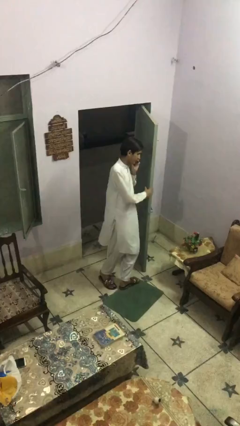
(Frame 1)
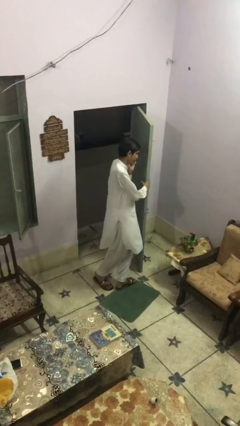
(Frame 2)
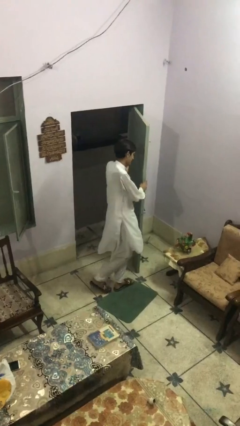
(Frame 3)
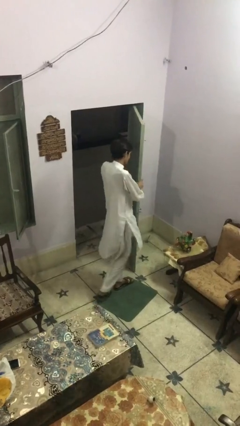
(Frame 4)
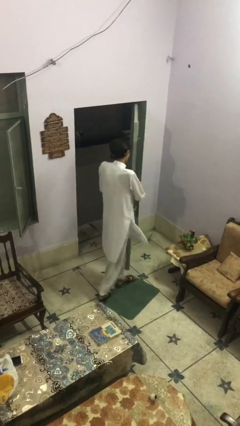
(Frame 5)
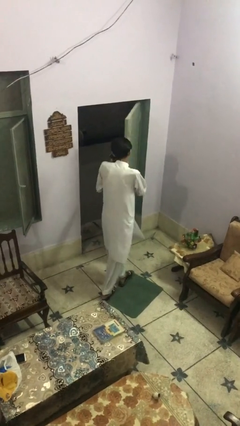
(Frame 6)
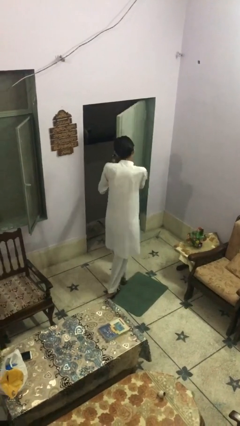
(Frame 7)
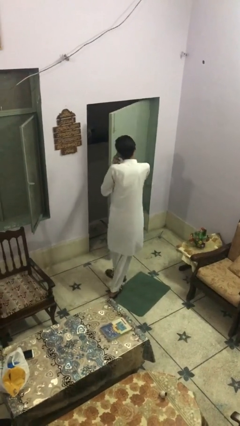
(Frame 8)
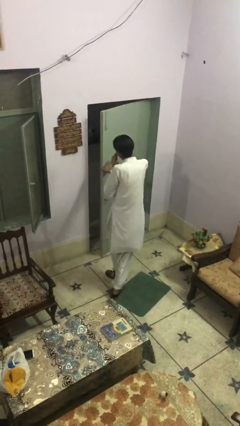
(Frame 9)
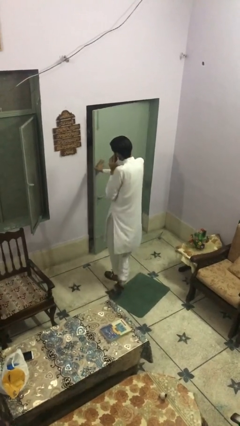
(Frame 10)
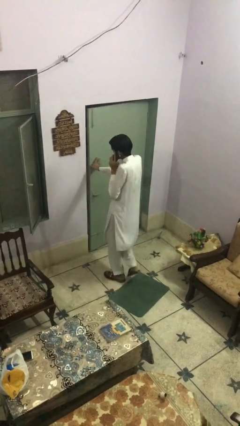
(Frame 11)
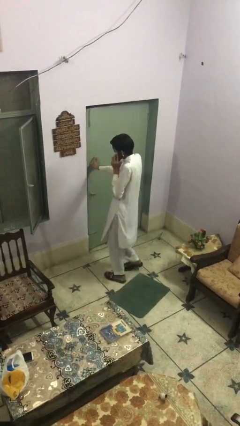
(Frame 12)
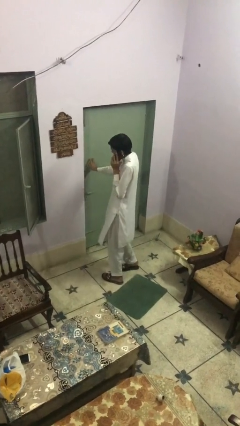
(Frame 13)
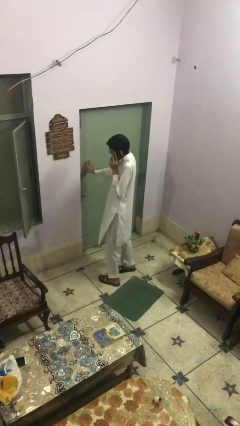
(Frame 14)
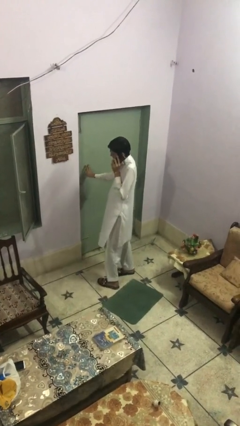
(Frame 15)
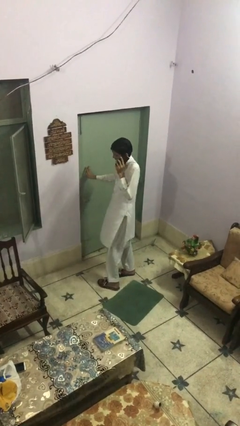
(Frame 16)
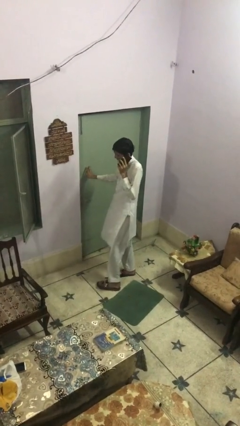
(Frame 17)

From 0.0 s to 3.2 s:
person closes facility door

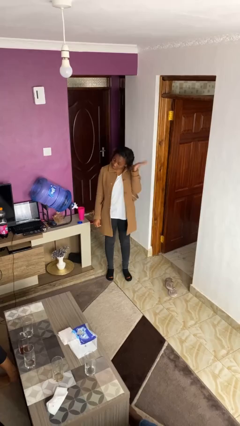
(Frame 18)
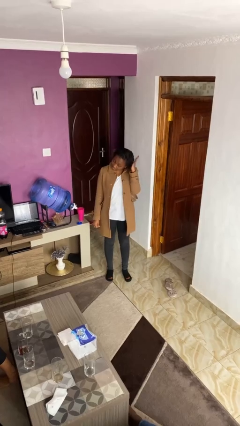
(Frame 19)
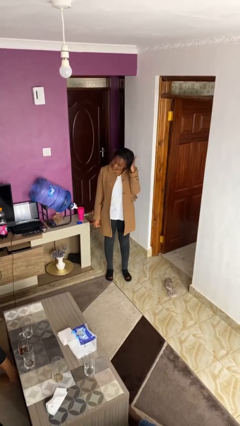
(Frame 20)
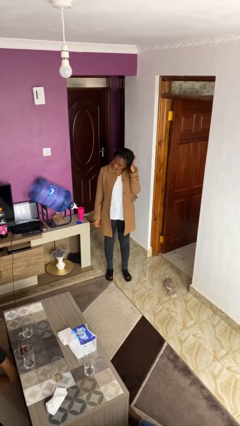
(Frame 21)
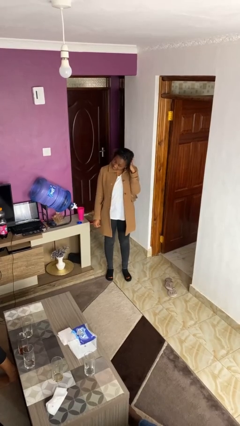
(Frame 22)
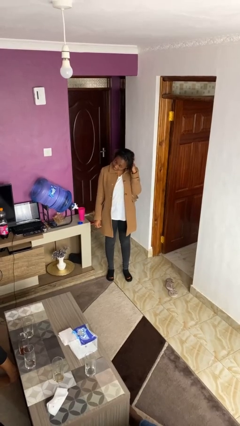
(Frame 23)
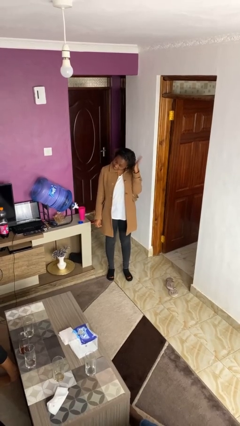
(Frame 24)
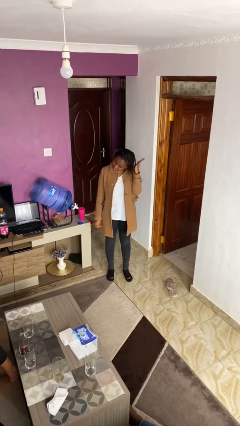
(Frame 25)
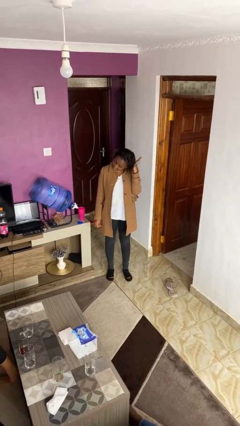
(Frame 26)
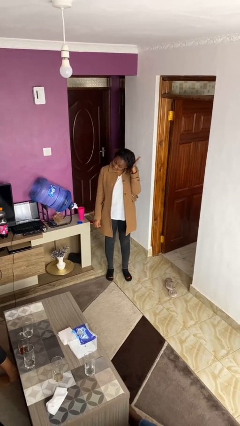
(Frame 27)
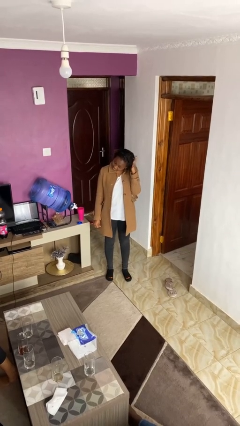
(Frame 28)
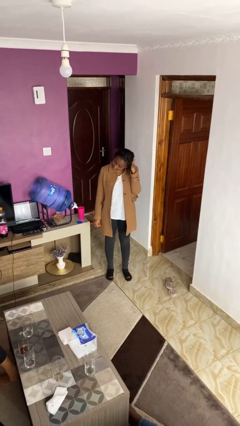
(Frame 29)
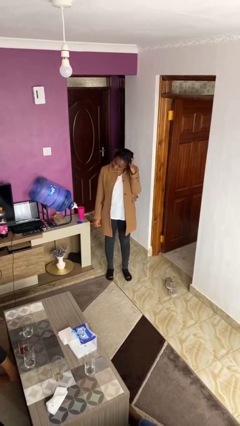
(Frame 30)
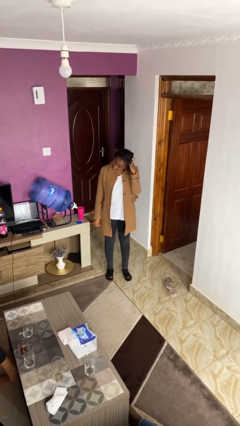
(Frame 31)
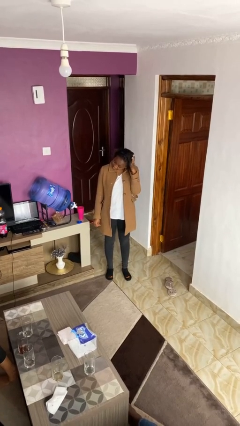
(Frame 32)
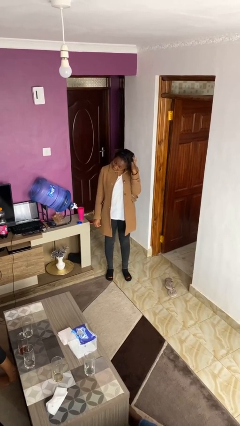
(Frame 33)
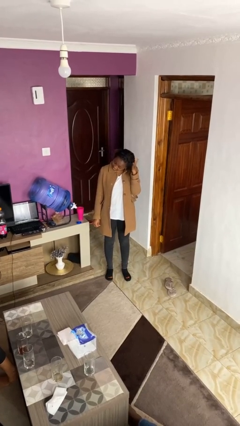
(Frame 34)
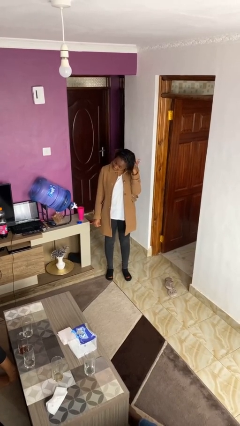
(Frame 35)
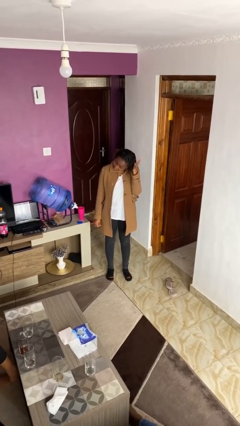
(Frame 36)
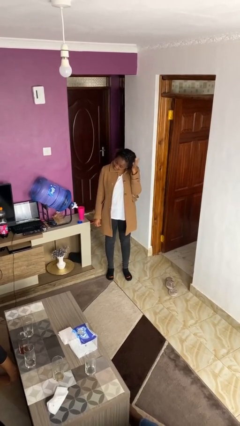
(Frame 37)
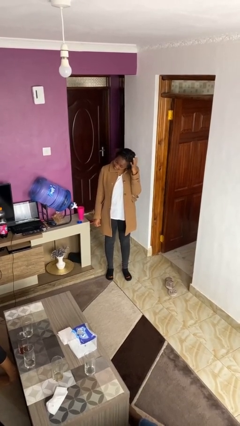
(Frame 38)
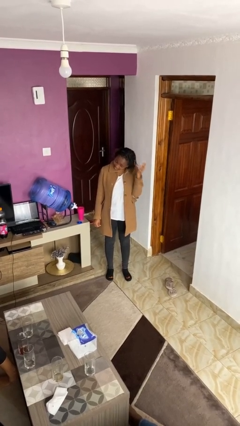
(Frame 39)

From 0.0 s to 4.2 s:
person scratches face

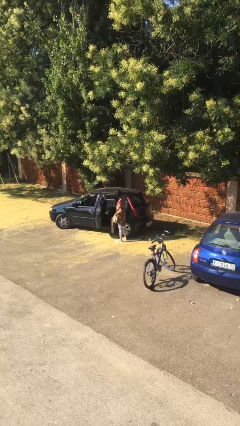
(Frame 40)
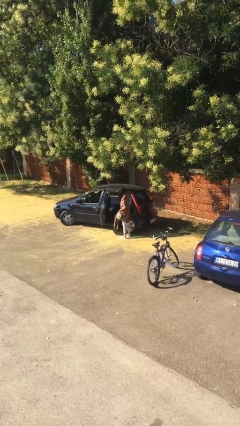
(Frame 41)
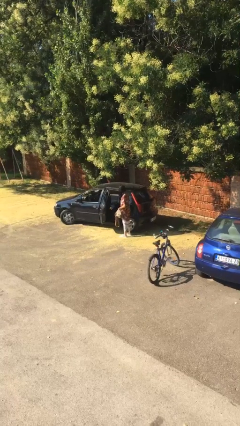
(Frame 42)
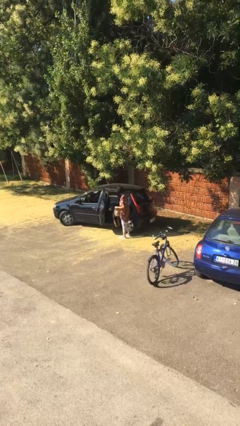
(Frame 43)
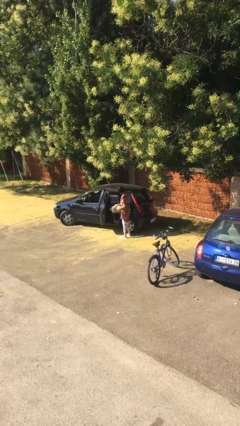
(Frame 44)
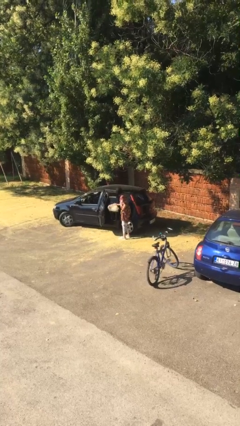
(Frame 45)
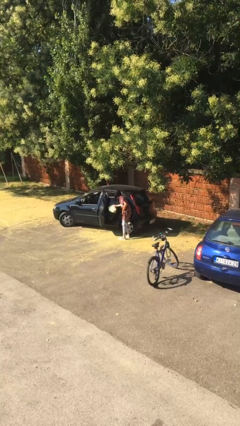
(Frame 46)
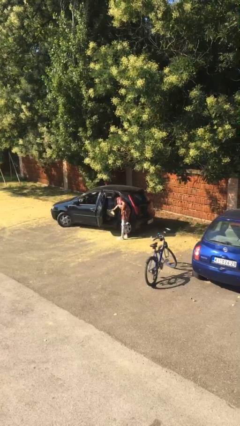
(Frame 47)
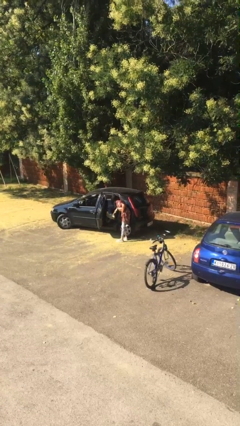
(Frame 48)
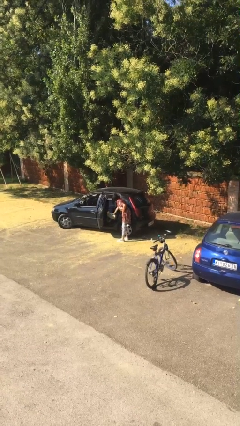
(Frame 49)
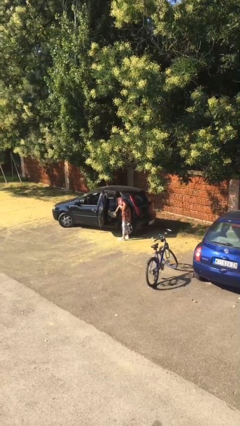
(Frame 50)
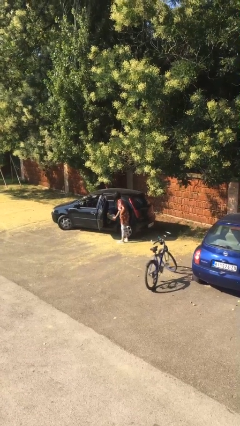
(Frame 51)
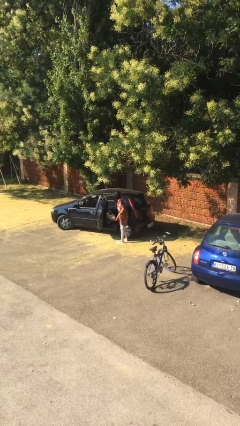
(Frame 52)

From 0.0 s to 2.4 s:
person loads car

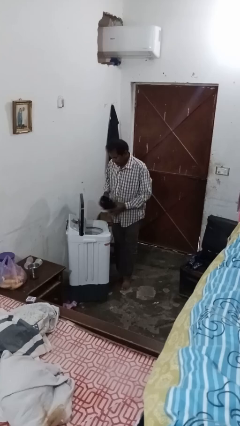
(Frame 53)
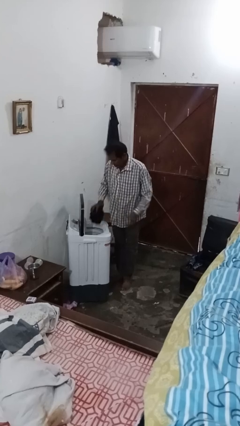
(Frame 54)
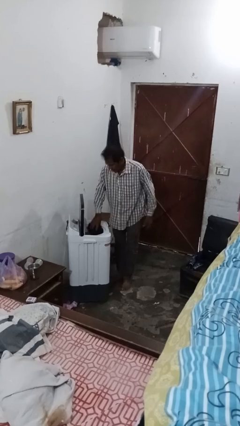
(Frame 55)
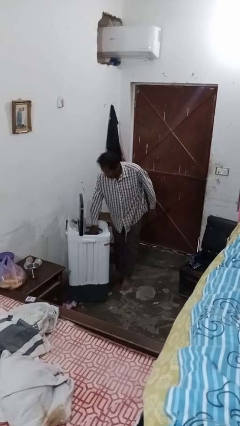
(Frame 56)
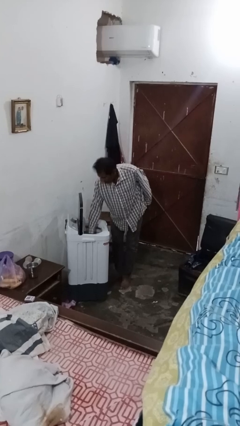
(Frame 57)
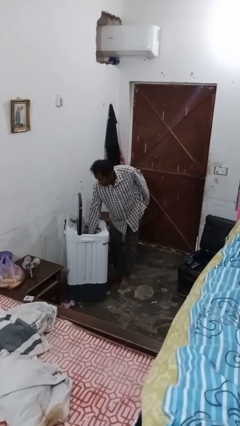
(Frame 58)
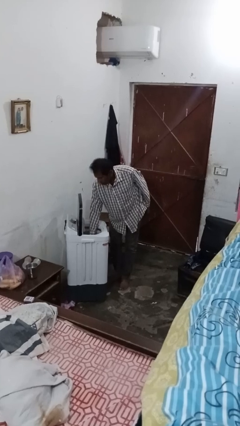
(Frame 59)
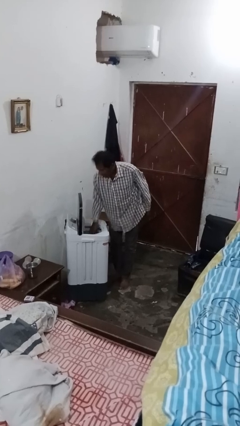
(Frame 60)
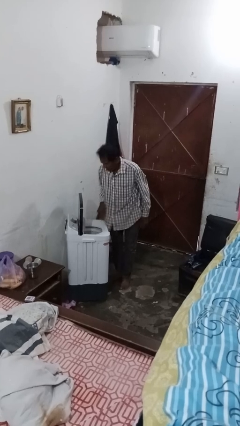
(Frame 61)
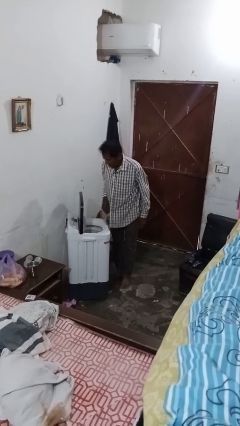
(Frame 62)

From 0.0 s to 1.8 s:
person loads clotheswasher

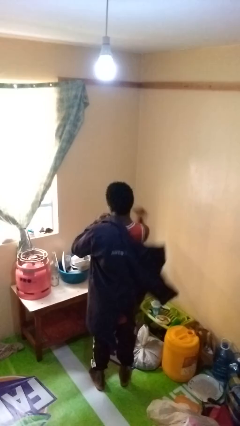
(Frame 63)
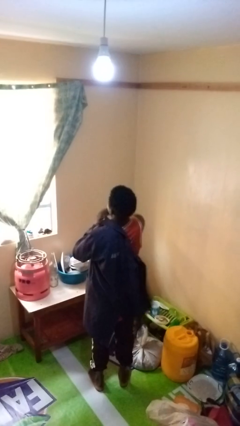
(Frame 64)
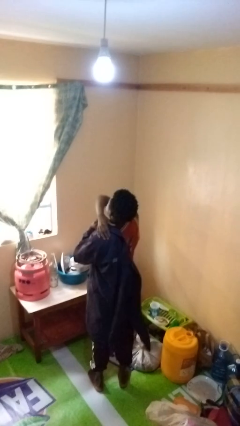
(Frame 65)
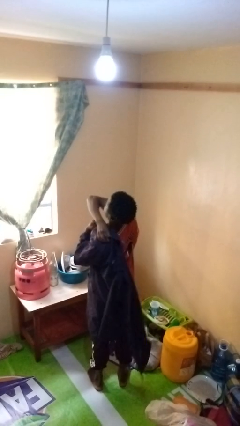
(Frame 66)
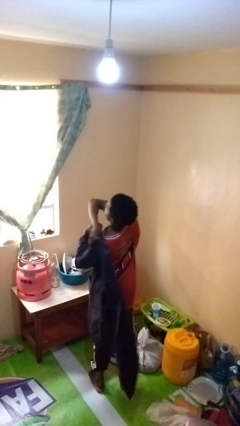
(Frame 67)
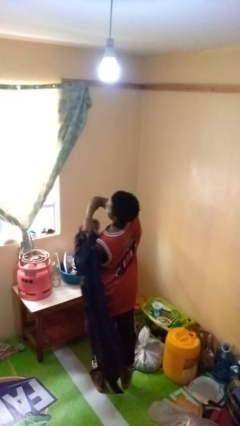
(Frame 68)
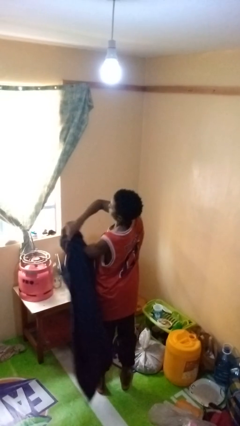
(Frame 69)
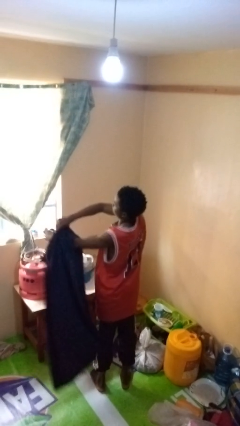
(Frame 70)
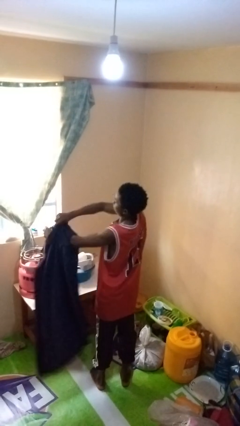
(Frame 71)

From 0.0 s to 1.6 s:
person takes off apron

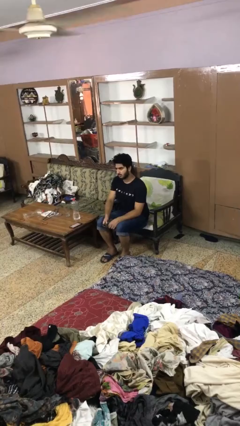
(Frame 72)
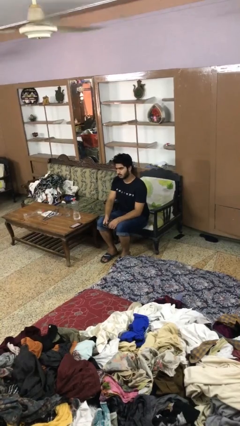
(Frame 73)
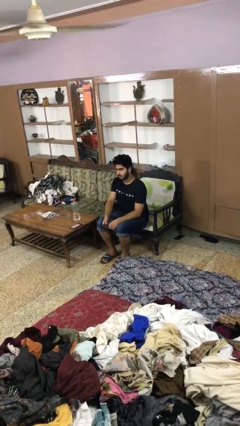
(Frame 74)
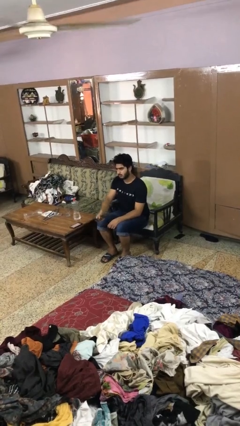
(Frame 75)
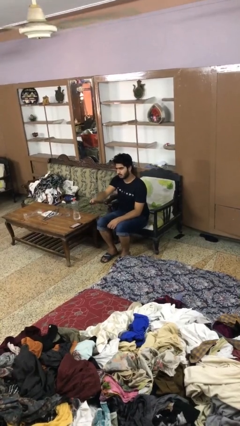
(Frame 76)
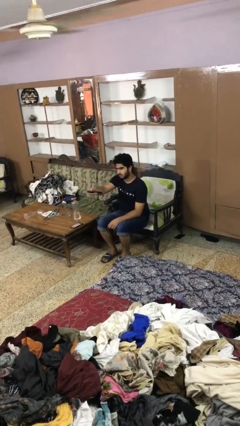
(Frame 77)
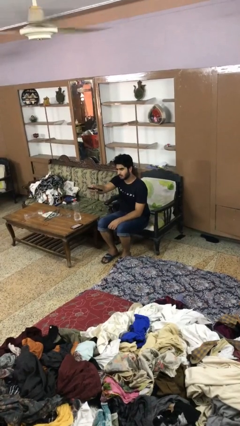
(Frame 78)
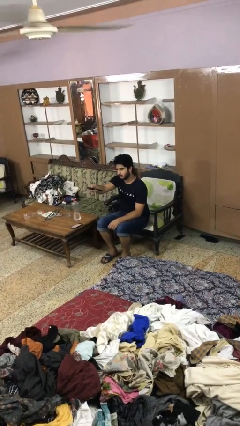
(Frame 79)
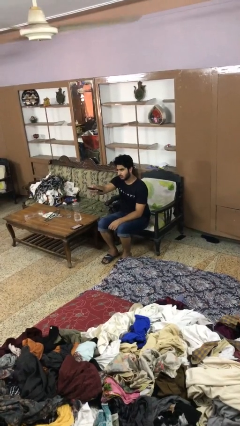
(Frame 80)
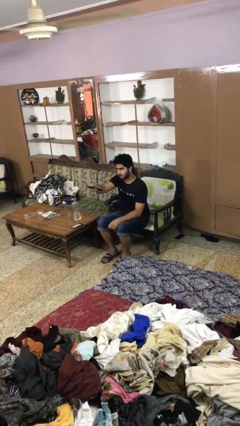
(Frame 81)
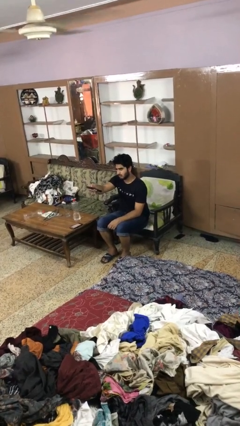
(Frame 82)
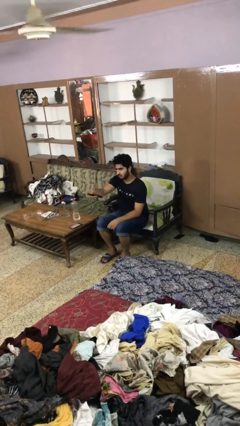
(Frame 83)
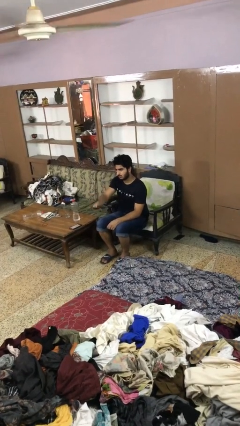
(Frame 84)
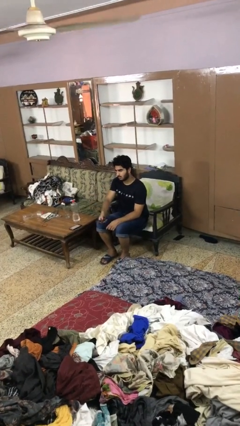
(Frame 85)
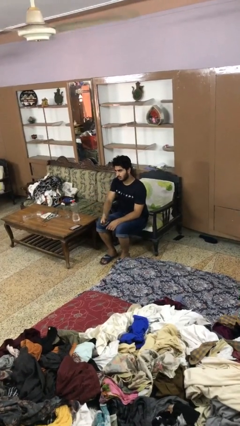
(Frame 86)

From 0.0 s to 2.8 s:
person uses television remote

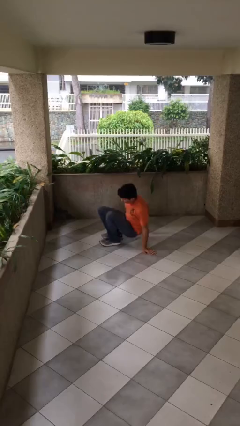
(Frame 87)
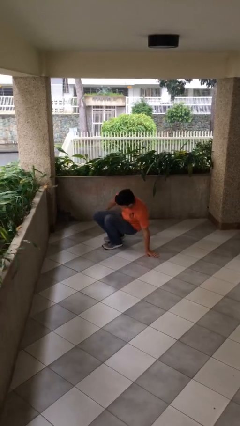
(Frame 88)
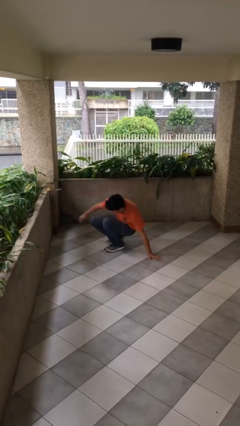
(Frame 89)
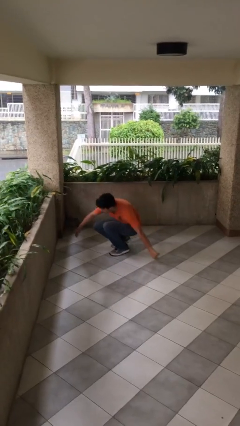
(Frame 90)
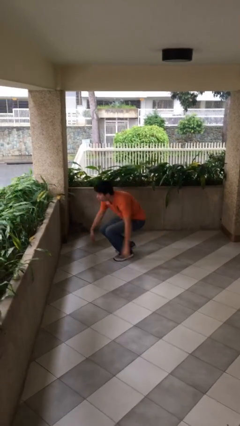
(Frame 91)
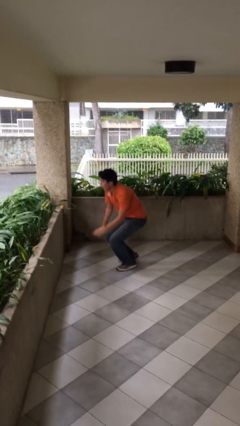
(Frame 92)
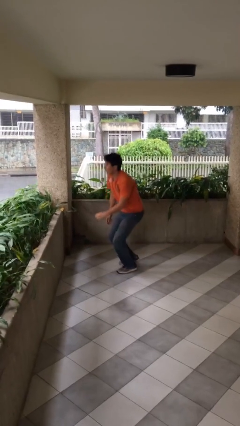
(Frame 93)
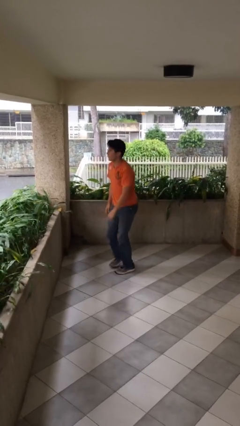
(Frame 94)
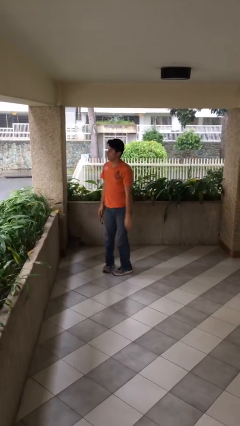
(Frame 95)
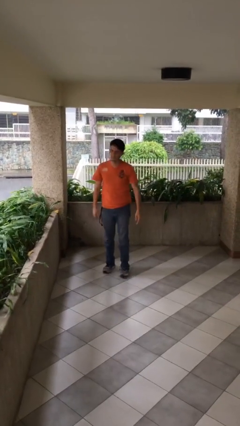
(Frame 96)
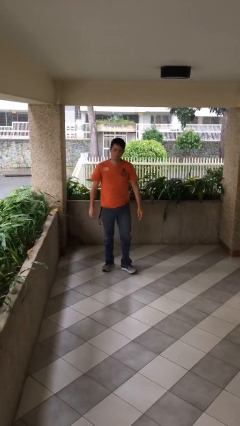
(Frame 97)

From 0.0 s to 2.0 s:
person stands up
